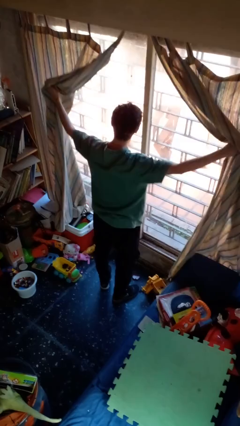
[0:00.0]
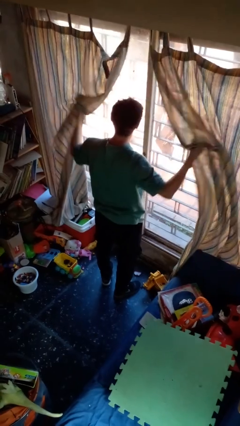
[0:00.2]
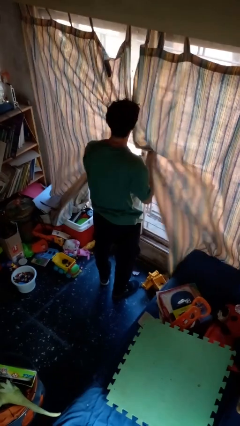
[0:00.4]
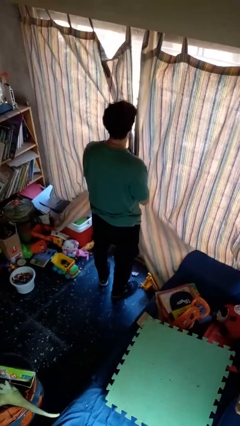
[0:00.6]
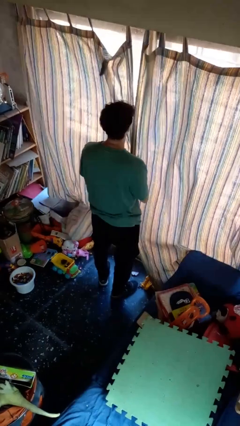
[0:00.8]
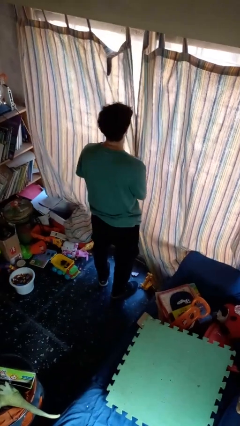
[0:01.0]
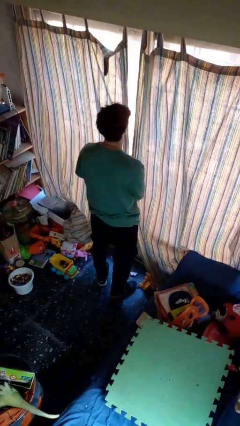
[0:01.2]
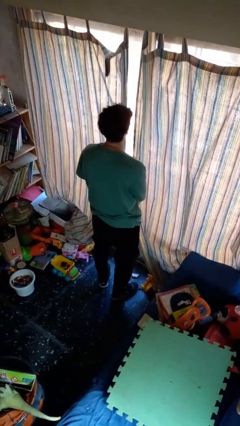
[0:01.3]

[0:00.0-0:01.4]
person closes curtains

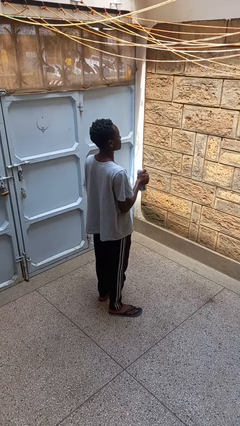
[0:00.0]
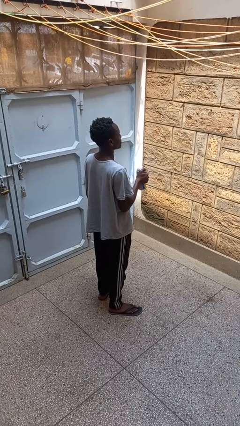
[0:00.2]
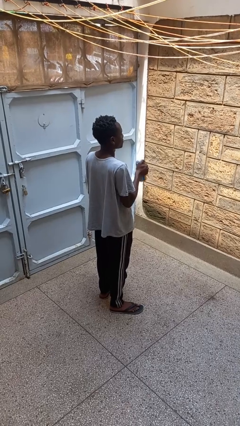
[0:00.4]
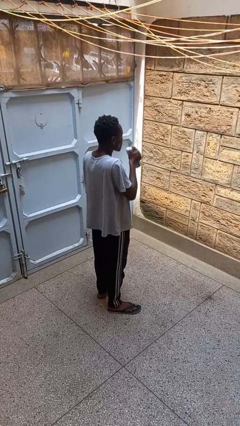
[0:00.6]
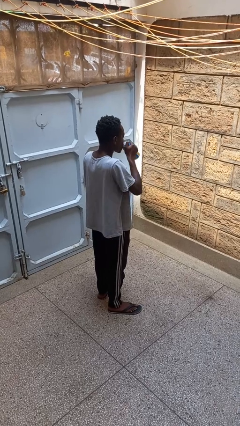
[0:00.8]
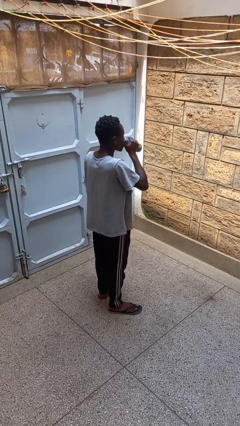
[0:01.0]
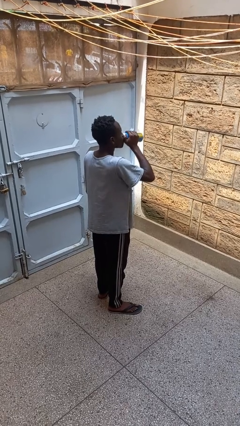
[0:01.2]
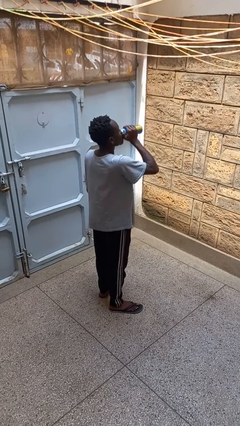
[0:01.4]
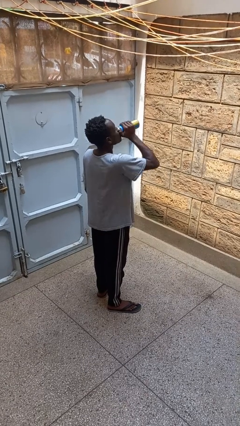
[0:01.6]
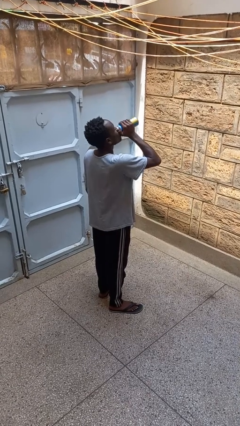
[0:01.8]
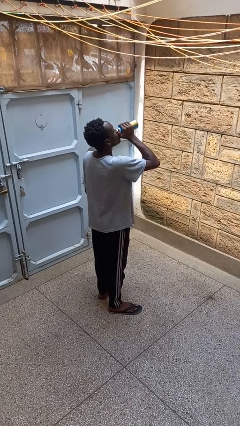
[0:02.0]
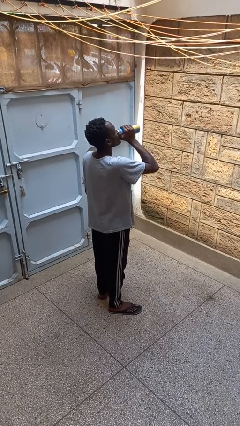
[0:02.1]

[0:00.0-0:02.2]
person drinks from beverage can

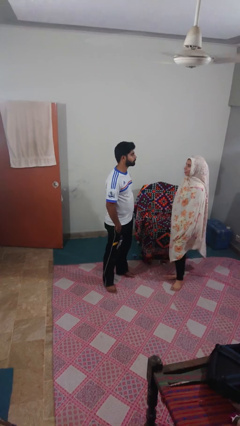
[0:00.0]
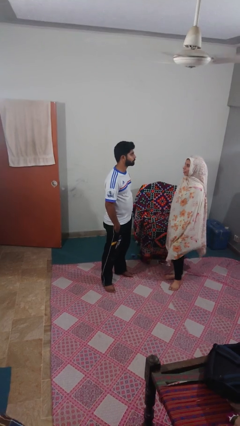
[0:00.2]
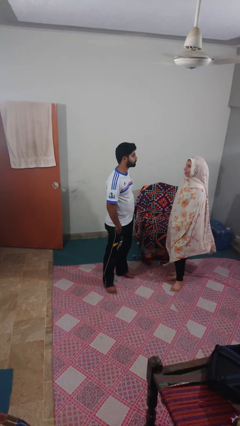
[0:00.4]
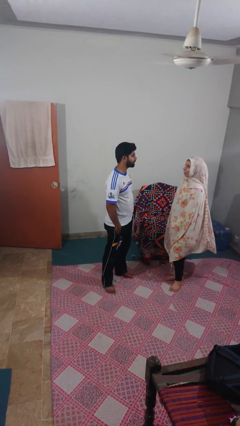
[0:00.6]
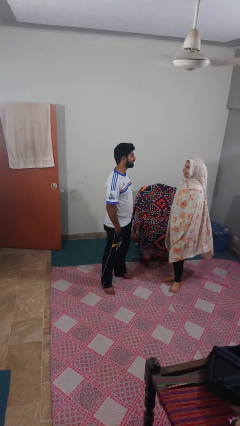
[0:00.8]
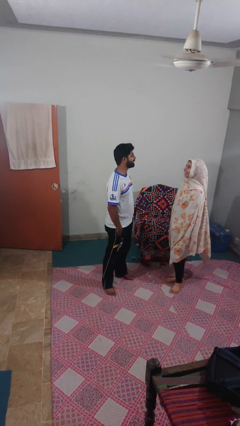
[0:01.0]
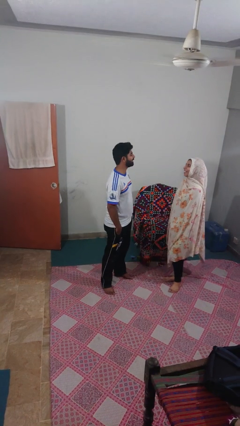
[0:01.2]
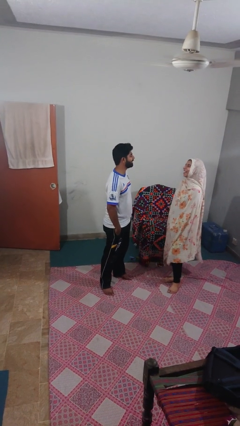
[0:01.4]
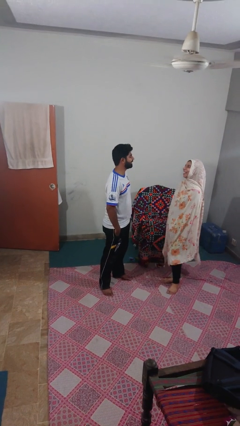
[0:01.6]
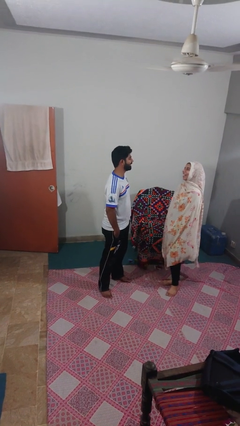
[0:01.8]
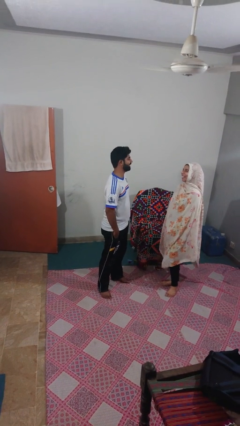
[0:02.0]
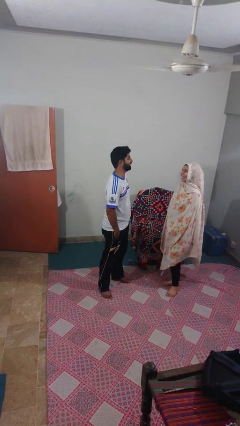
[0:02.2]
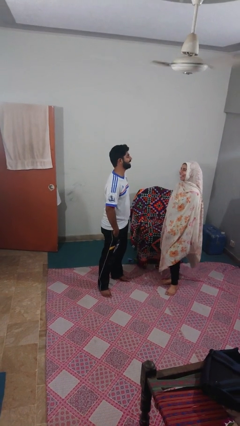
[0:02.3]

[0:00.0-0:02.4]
person laughs with person

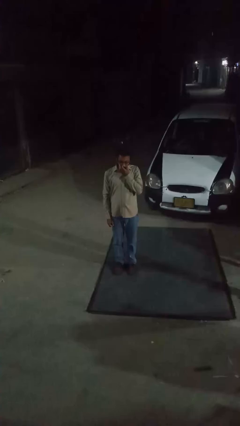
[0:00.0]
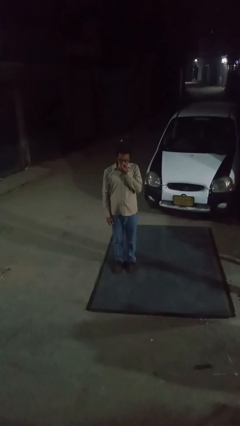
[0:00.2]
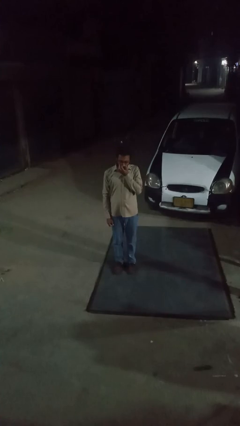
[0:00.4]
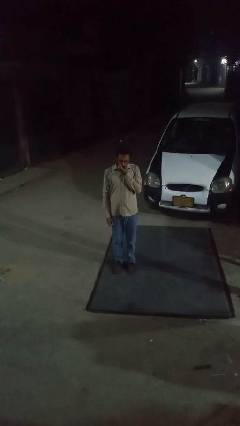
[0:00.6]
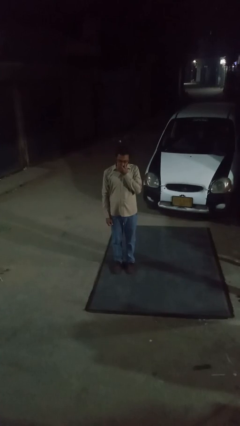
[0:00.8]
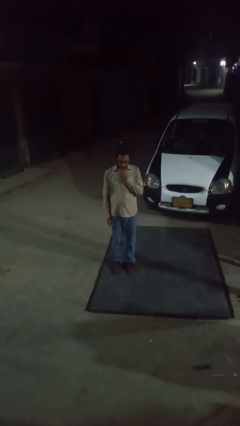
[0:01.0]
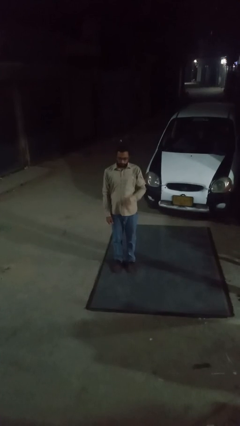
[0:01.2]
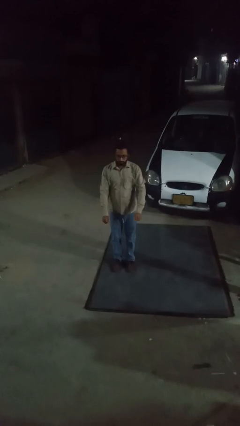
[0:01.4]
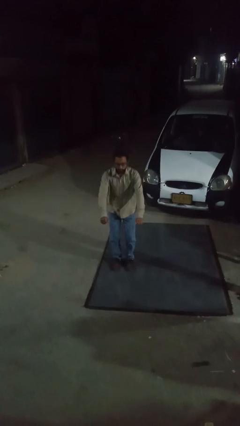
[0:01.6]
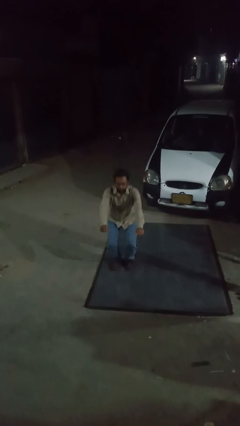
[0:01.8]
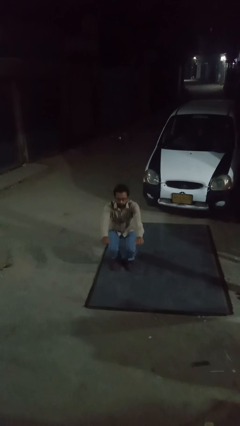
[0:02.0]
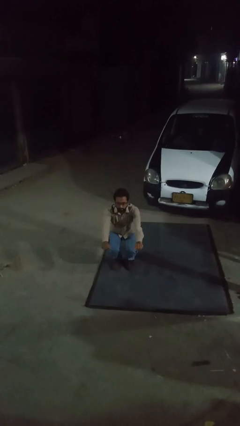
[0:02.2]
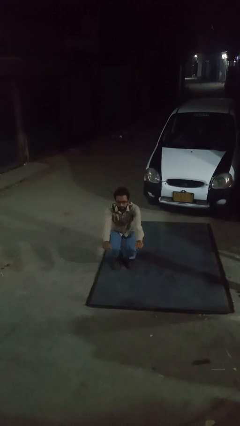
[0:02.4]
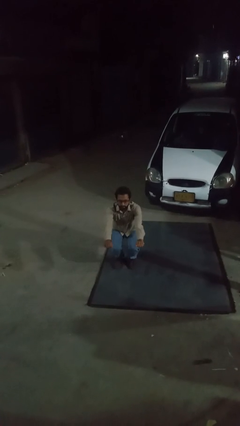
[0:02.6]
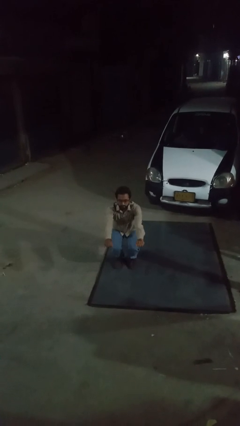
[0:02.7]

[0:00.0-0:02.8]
person squats

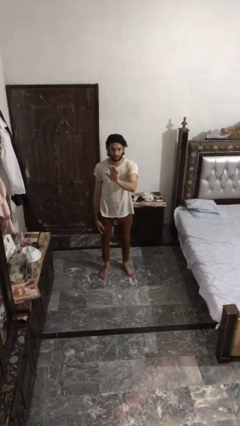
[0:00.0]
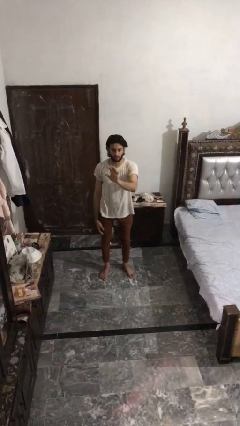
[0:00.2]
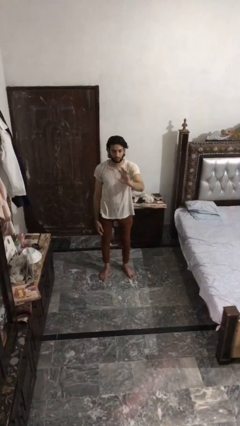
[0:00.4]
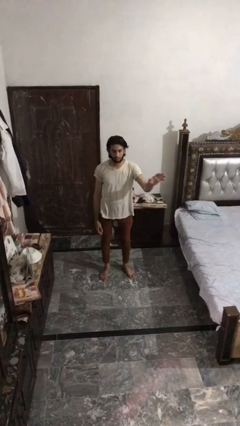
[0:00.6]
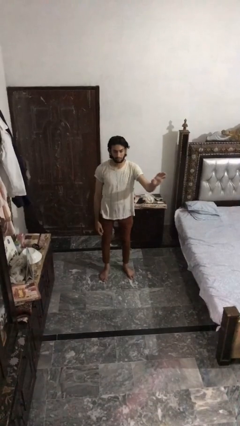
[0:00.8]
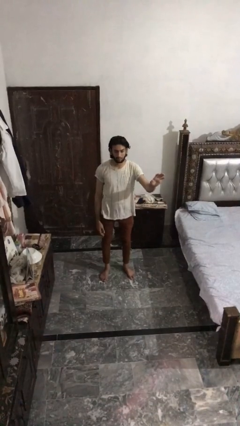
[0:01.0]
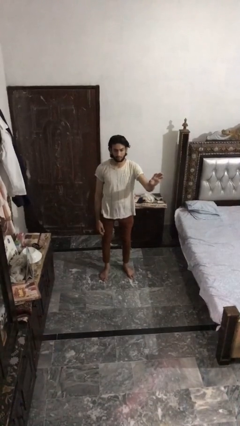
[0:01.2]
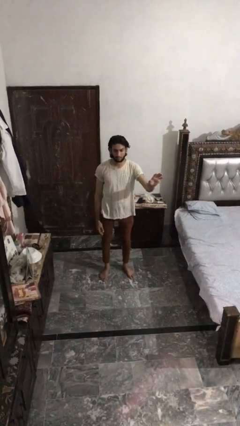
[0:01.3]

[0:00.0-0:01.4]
person gestures swipe right

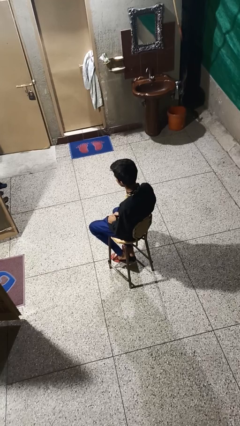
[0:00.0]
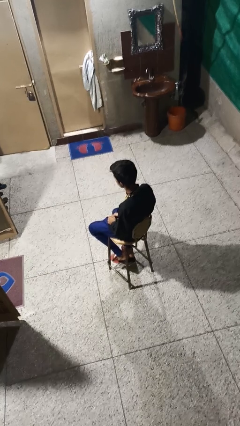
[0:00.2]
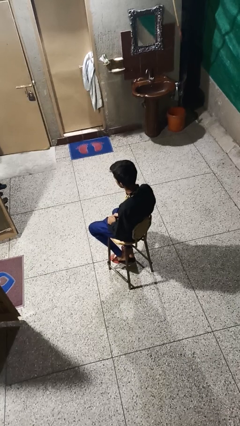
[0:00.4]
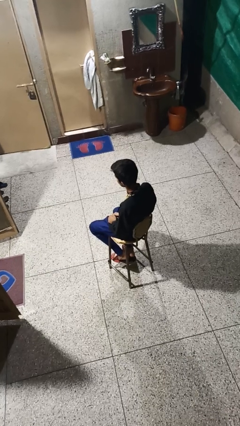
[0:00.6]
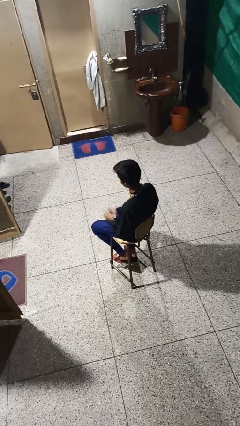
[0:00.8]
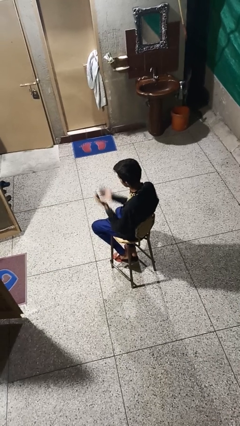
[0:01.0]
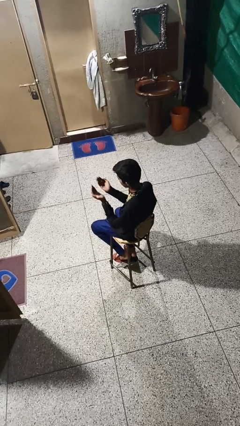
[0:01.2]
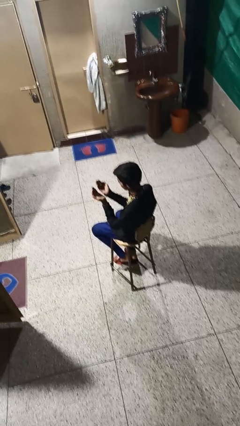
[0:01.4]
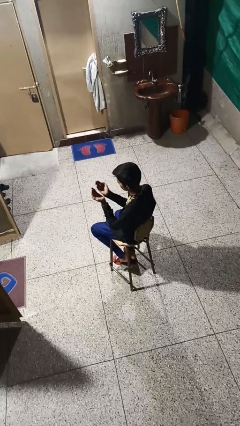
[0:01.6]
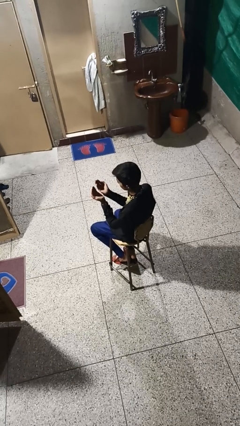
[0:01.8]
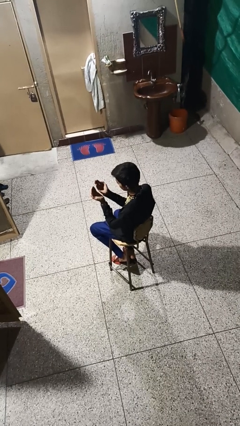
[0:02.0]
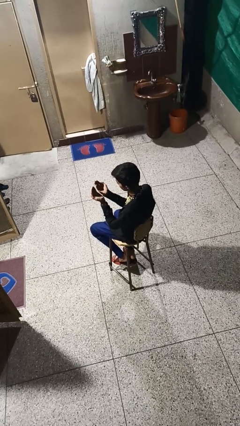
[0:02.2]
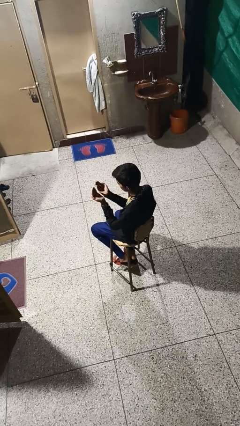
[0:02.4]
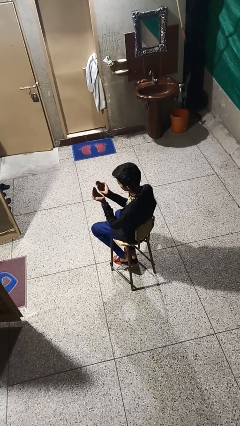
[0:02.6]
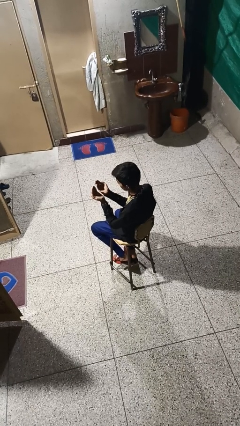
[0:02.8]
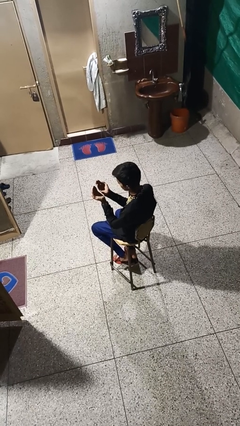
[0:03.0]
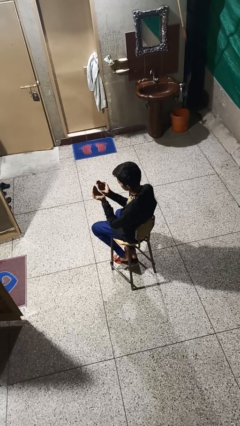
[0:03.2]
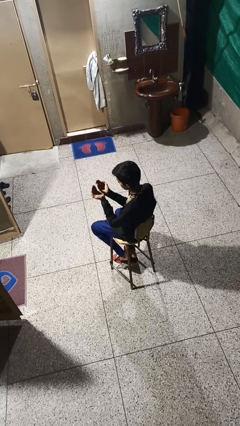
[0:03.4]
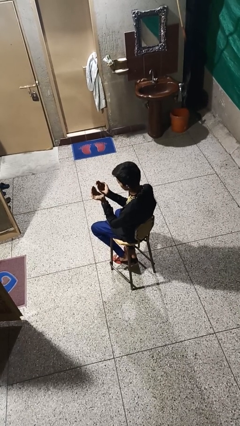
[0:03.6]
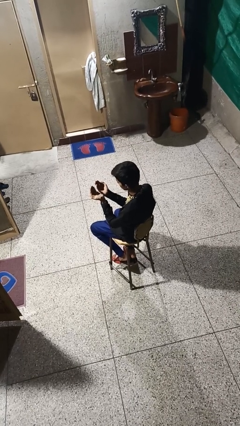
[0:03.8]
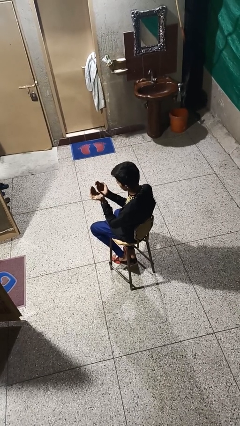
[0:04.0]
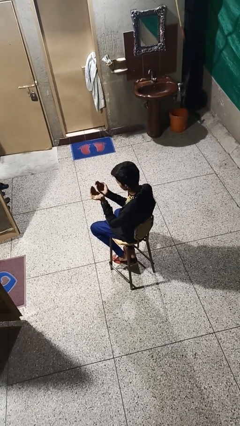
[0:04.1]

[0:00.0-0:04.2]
person prays

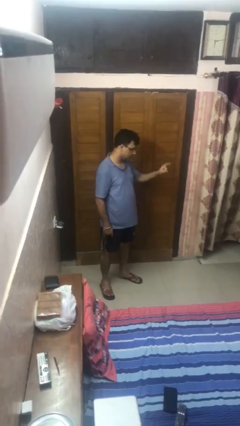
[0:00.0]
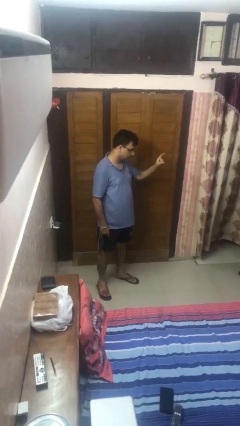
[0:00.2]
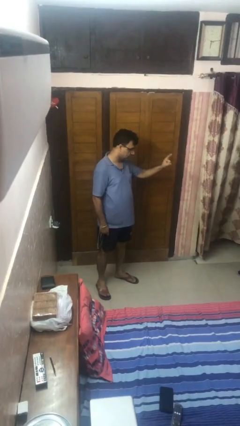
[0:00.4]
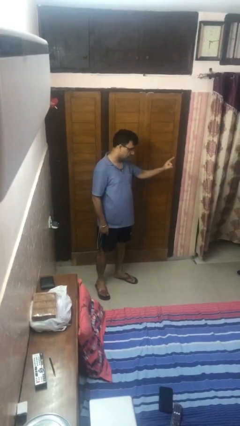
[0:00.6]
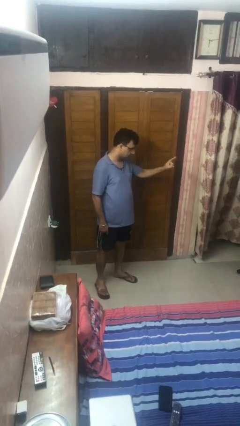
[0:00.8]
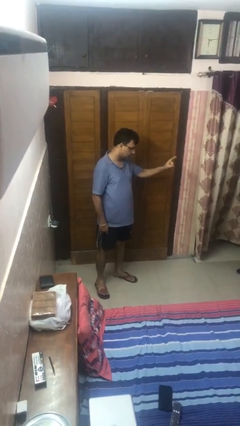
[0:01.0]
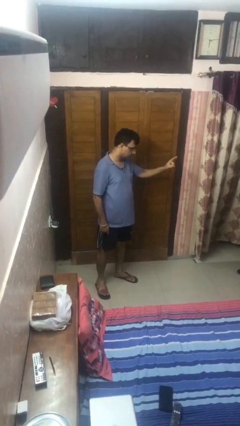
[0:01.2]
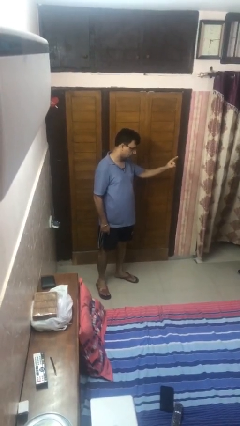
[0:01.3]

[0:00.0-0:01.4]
person points at person

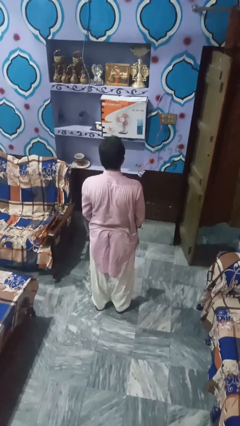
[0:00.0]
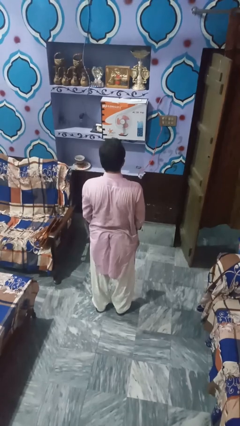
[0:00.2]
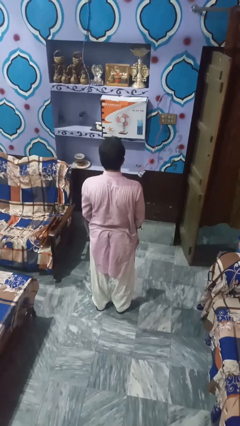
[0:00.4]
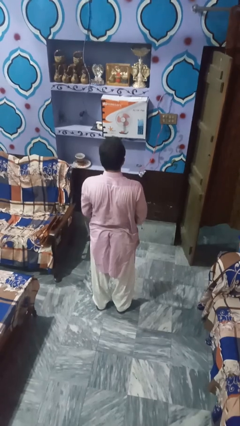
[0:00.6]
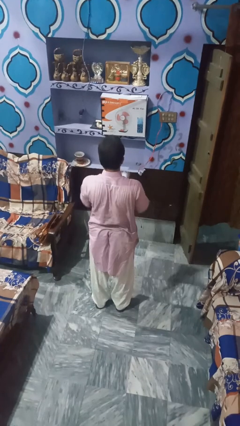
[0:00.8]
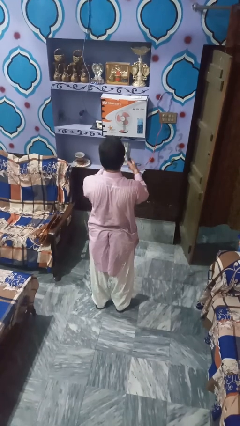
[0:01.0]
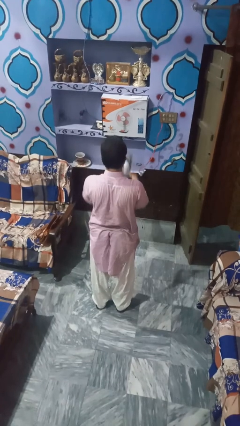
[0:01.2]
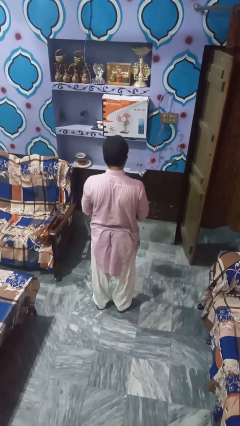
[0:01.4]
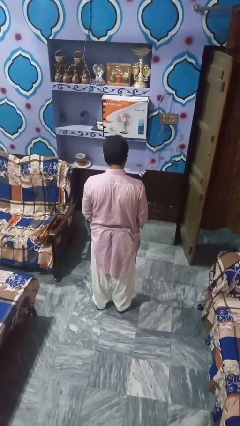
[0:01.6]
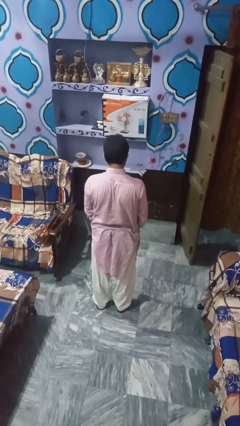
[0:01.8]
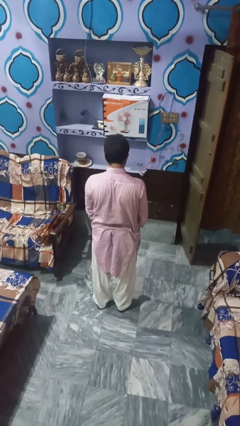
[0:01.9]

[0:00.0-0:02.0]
person drops object
